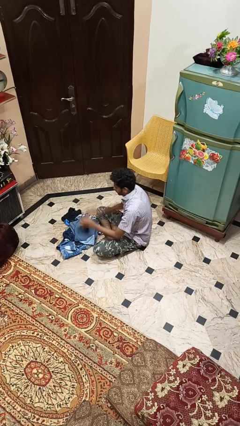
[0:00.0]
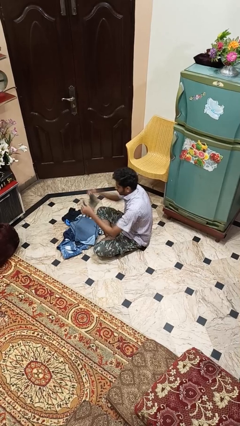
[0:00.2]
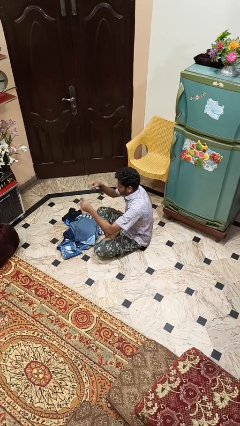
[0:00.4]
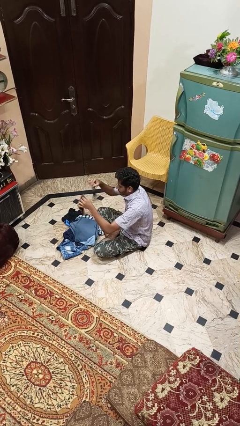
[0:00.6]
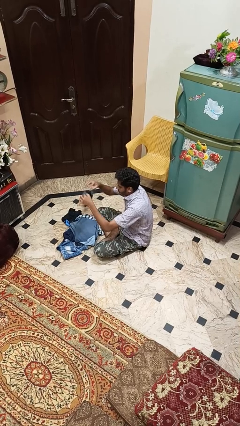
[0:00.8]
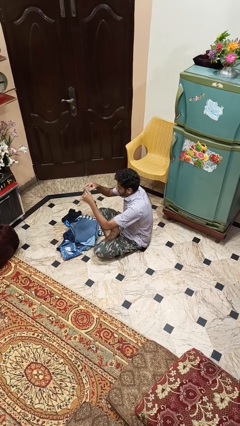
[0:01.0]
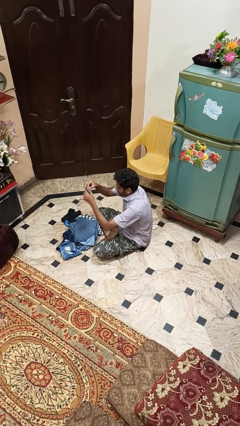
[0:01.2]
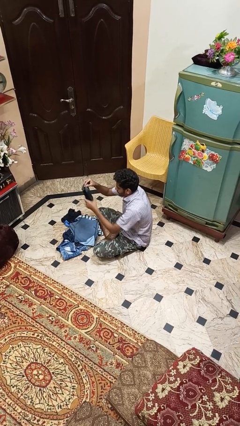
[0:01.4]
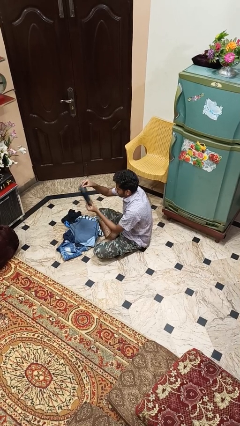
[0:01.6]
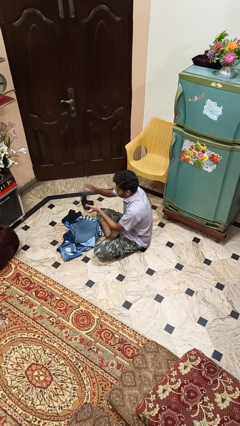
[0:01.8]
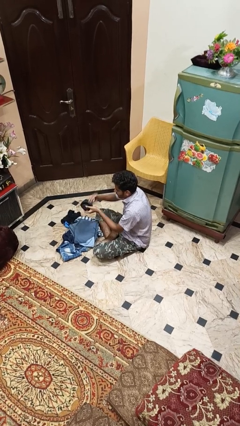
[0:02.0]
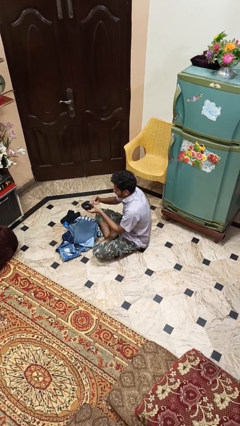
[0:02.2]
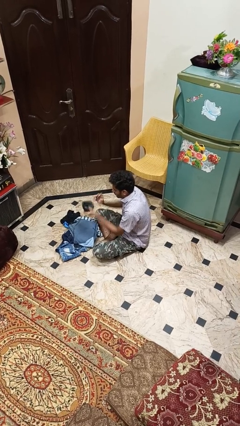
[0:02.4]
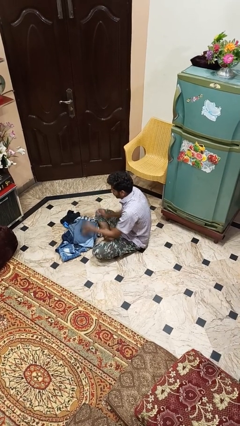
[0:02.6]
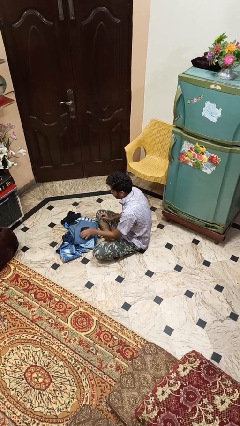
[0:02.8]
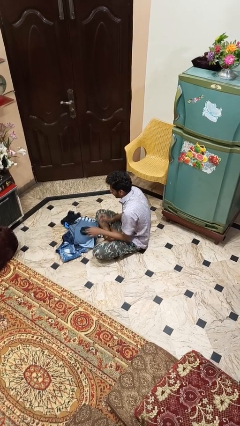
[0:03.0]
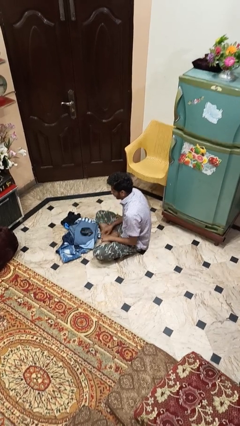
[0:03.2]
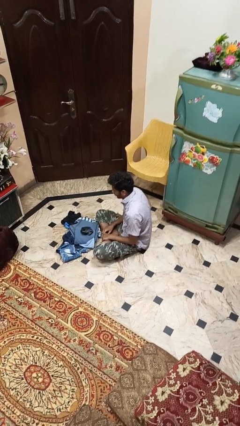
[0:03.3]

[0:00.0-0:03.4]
person folds socks

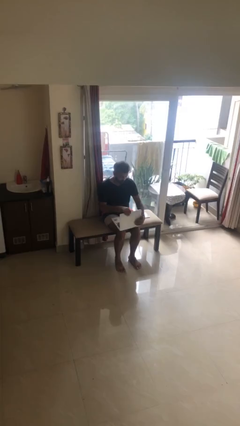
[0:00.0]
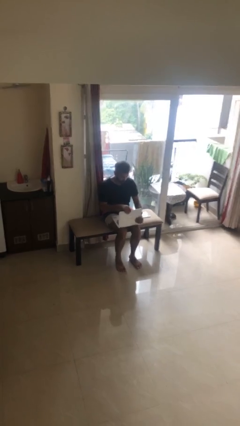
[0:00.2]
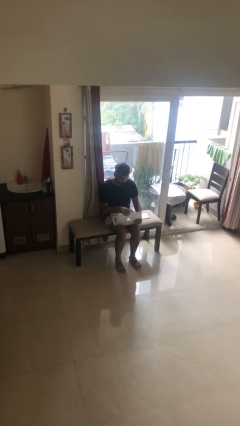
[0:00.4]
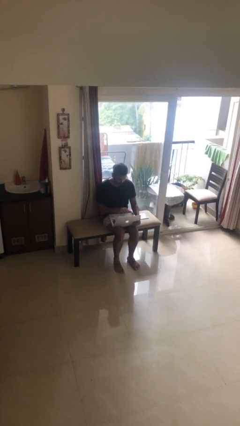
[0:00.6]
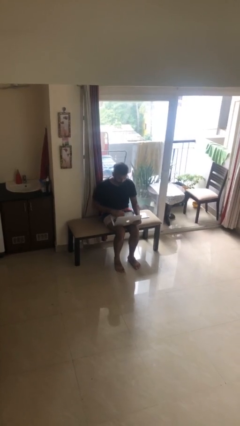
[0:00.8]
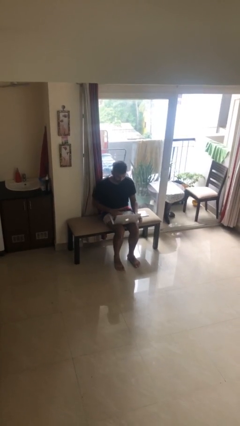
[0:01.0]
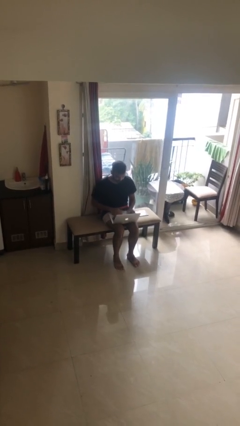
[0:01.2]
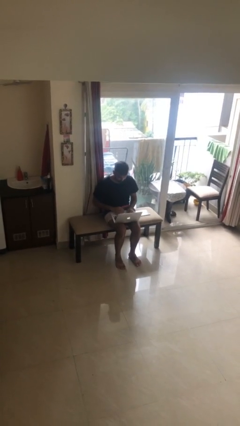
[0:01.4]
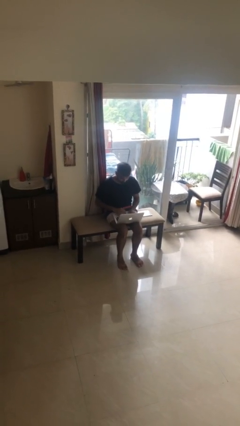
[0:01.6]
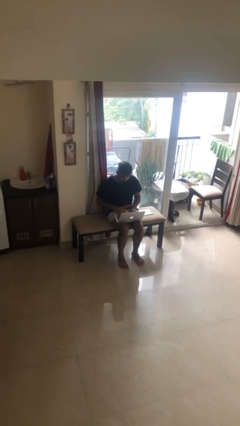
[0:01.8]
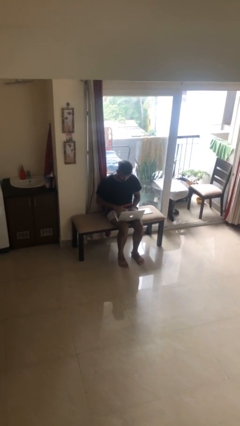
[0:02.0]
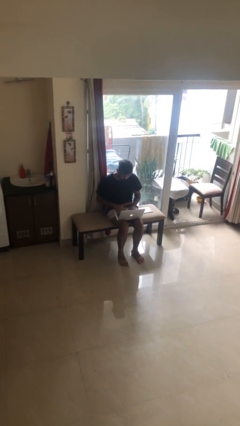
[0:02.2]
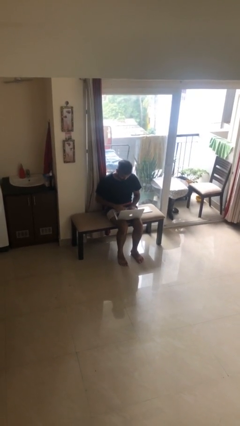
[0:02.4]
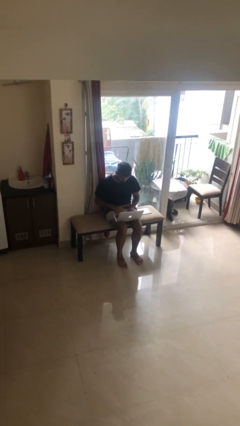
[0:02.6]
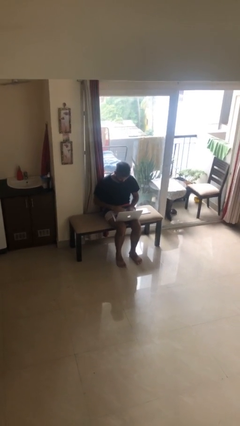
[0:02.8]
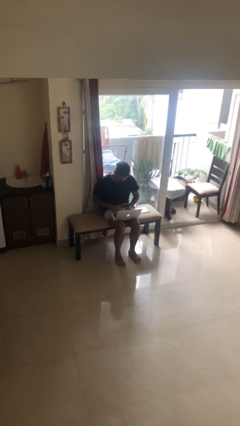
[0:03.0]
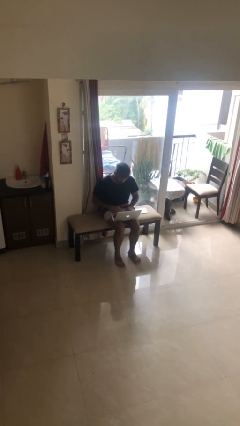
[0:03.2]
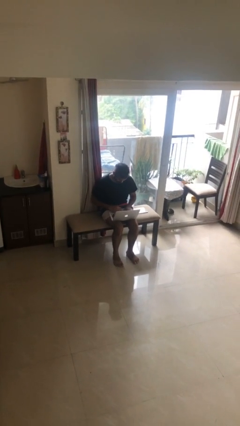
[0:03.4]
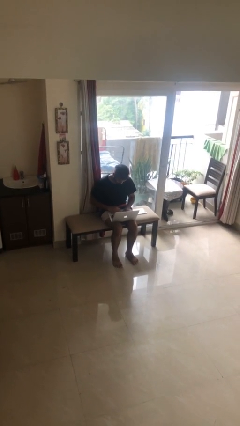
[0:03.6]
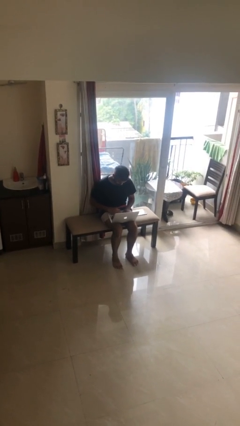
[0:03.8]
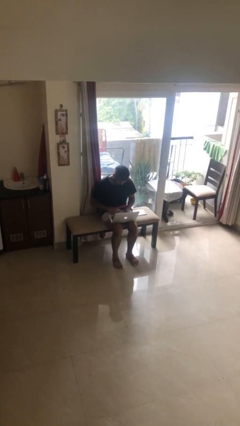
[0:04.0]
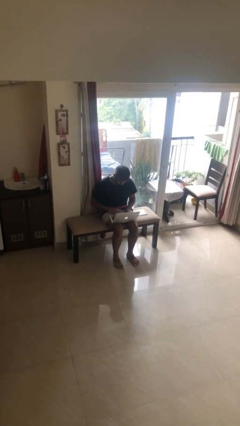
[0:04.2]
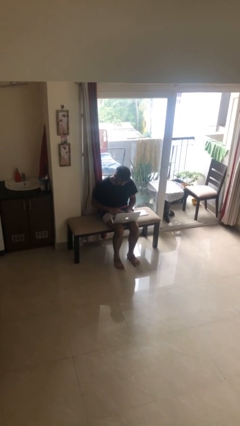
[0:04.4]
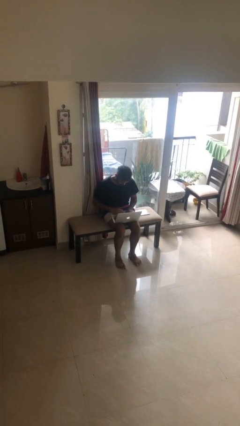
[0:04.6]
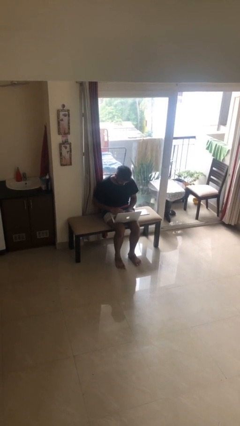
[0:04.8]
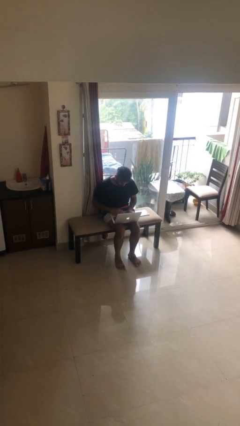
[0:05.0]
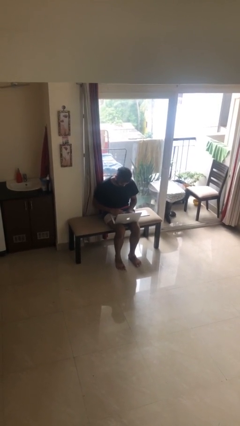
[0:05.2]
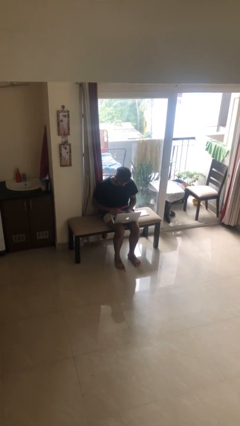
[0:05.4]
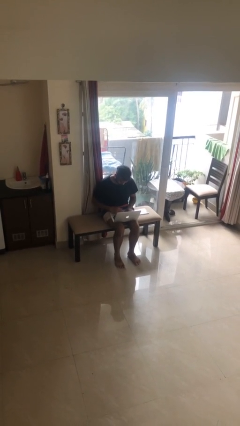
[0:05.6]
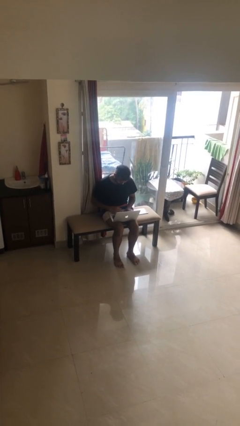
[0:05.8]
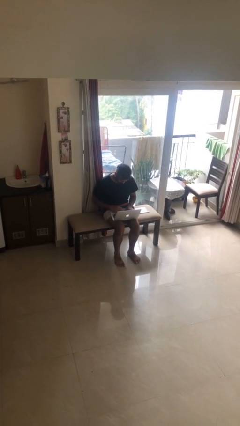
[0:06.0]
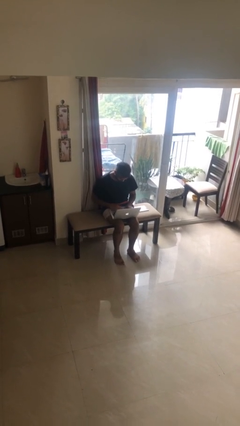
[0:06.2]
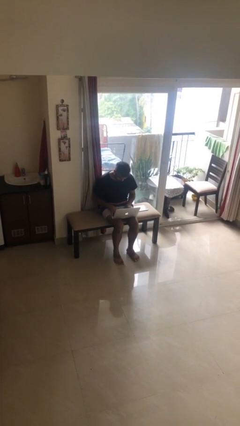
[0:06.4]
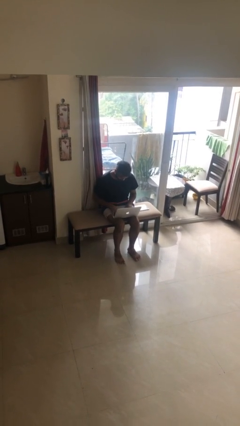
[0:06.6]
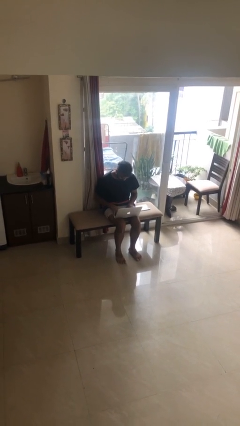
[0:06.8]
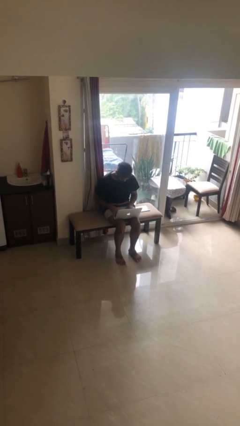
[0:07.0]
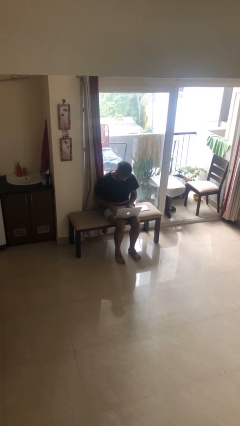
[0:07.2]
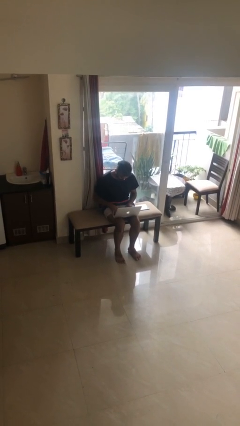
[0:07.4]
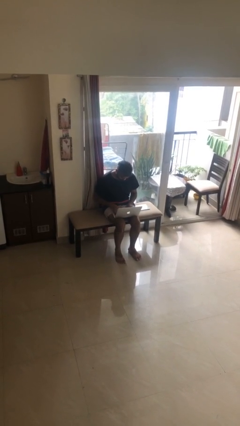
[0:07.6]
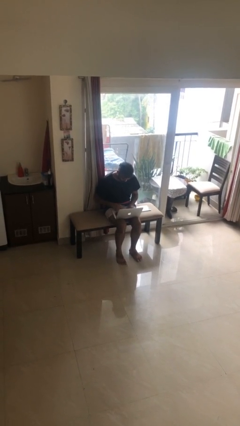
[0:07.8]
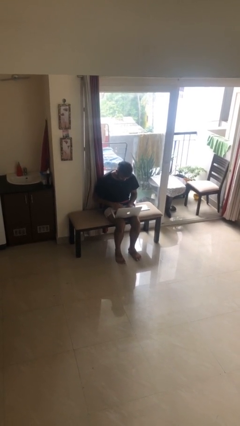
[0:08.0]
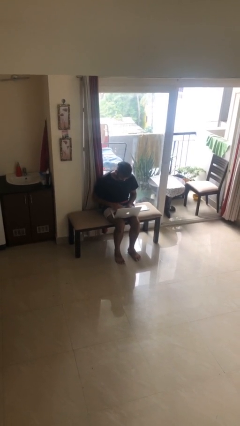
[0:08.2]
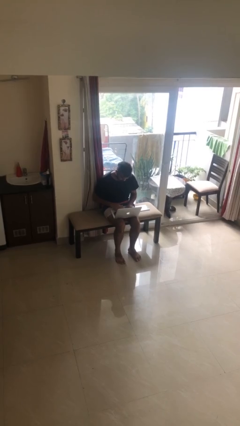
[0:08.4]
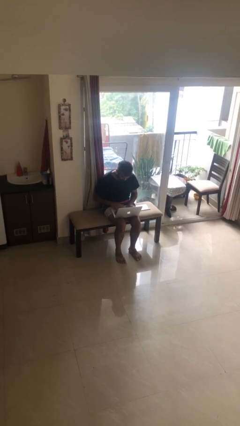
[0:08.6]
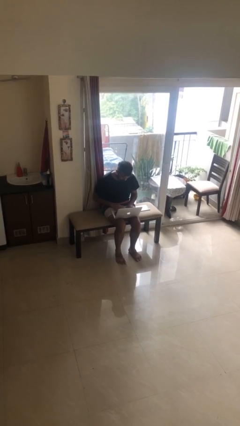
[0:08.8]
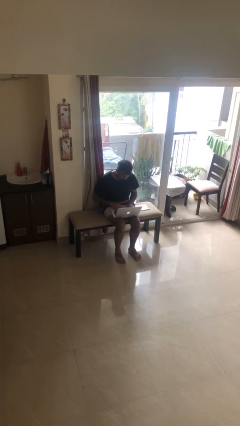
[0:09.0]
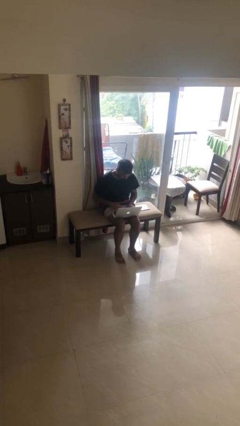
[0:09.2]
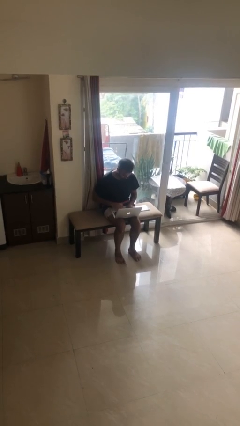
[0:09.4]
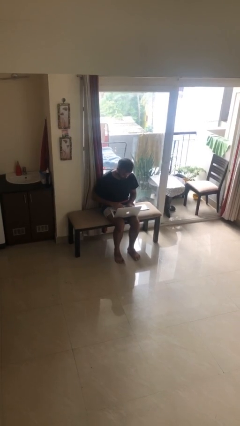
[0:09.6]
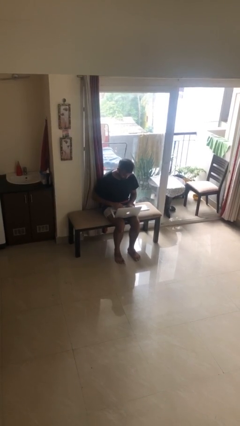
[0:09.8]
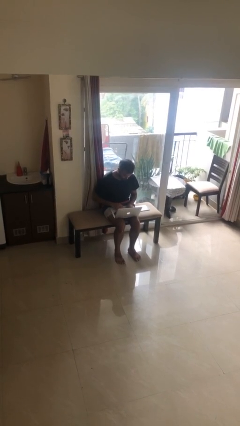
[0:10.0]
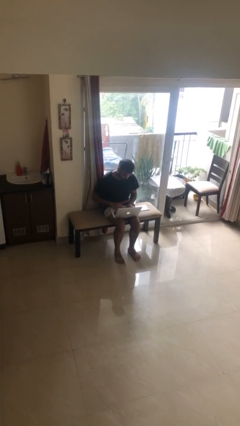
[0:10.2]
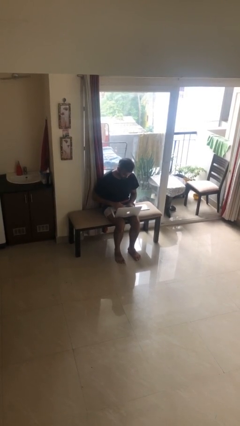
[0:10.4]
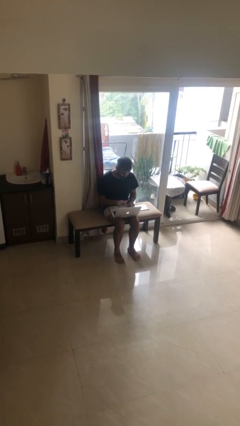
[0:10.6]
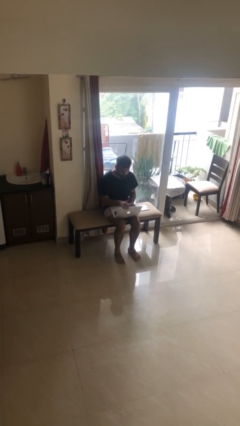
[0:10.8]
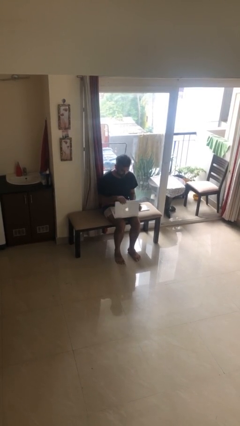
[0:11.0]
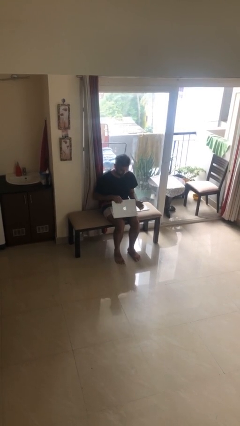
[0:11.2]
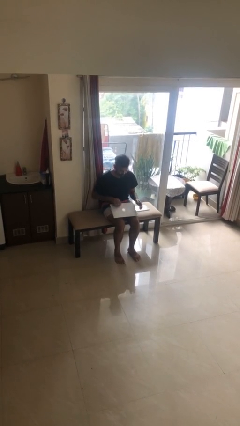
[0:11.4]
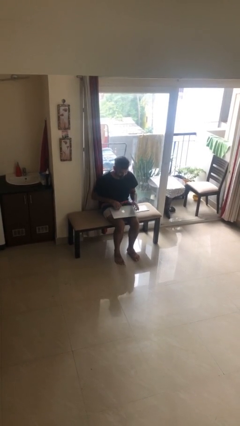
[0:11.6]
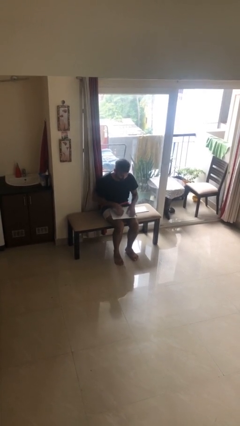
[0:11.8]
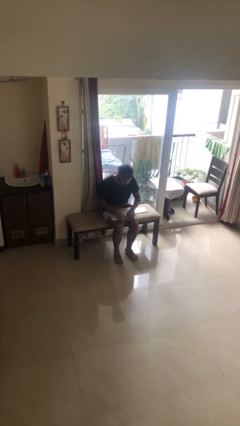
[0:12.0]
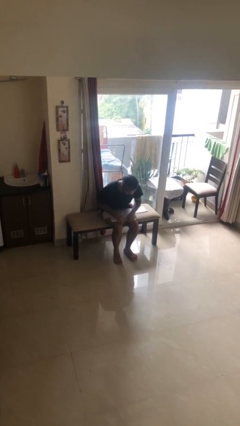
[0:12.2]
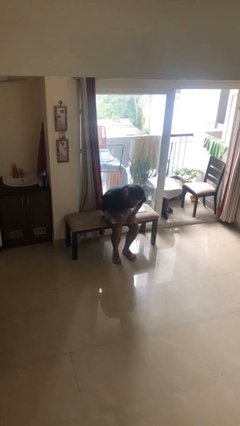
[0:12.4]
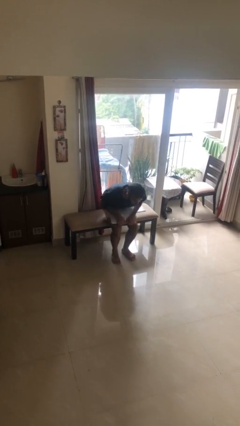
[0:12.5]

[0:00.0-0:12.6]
person interacts with laptop

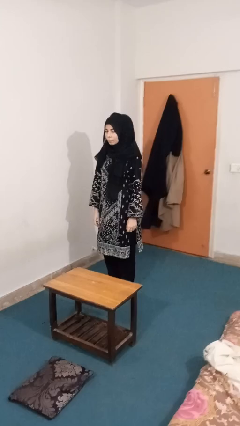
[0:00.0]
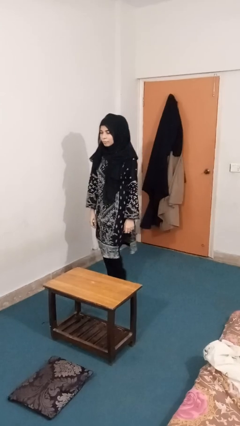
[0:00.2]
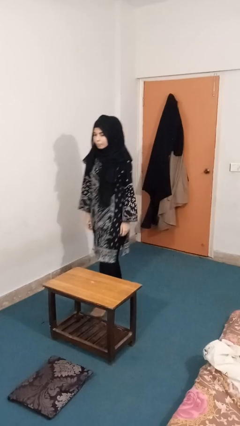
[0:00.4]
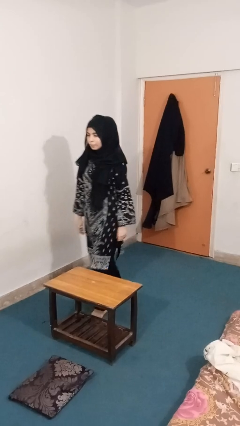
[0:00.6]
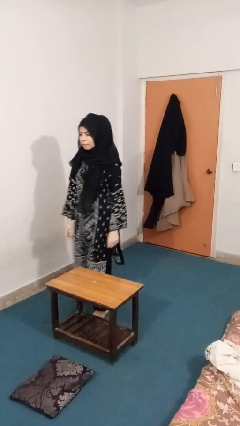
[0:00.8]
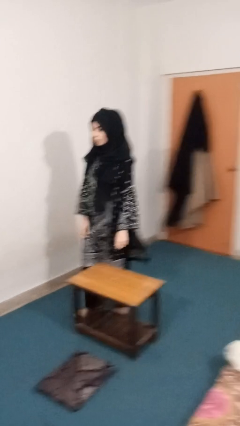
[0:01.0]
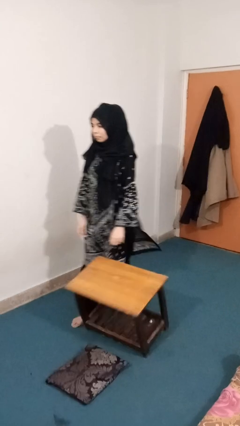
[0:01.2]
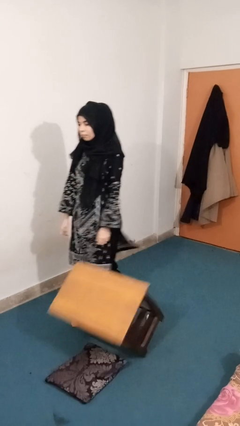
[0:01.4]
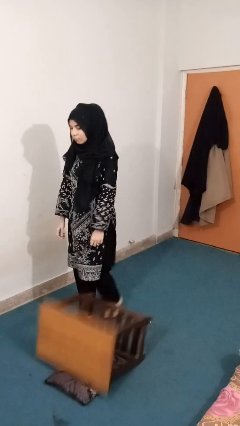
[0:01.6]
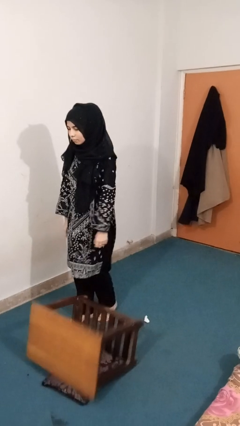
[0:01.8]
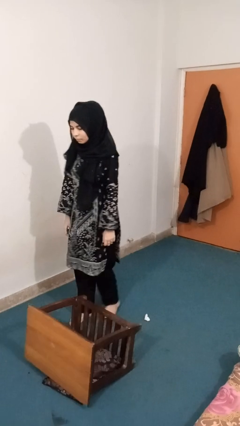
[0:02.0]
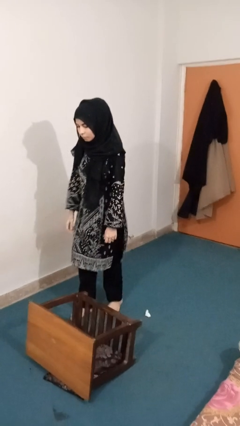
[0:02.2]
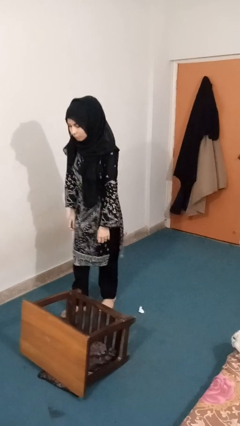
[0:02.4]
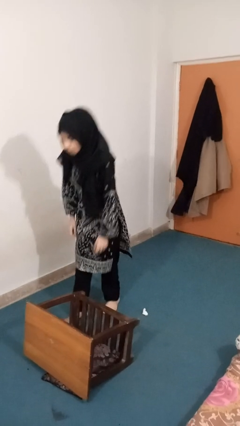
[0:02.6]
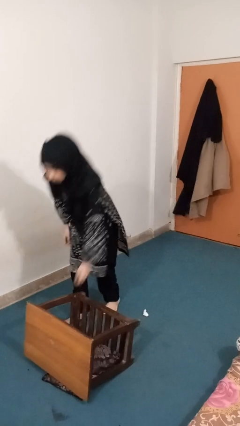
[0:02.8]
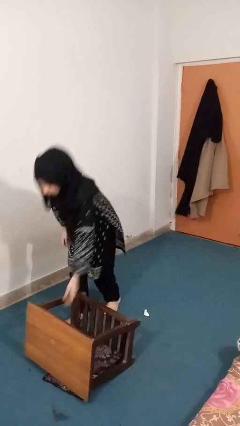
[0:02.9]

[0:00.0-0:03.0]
person knocks over furniture
